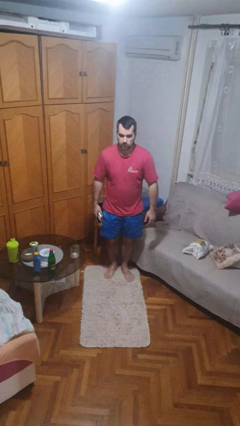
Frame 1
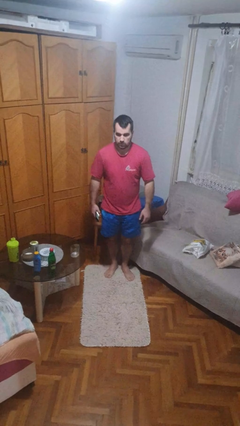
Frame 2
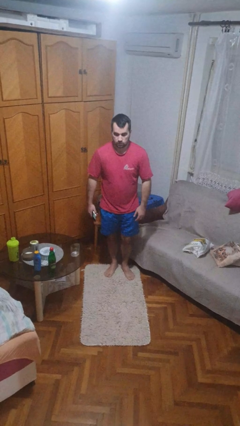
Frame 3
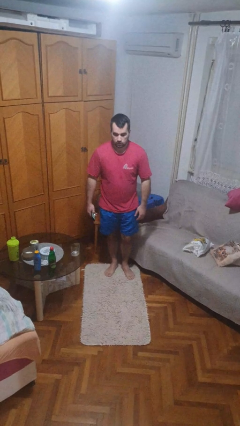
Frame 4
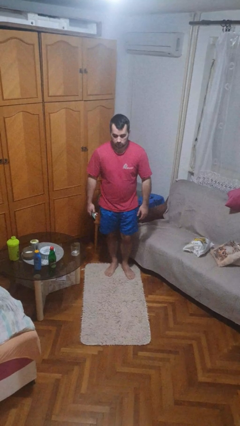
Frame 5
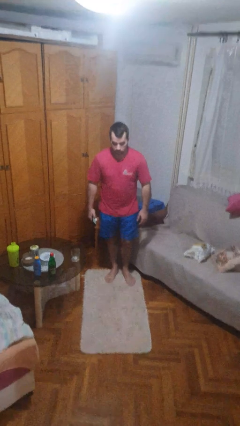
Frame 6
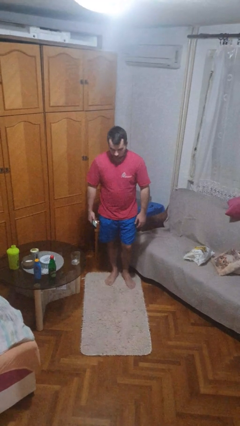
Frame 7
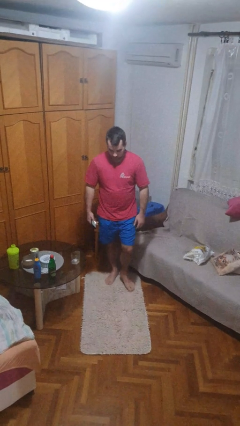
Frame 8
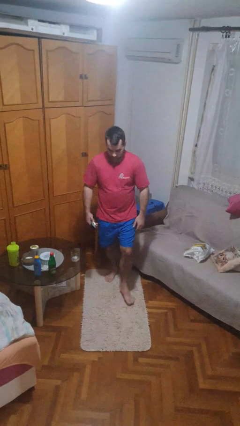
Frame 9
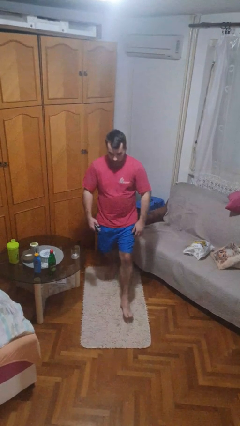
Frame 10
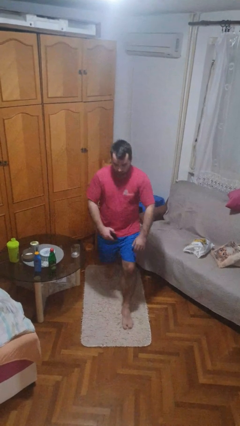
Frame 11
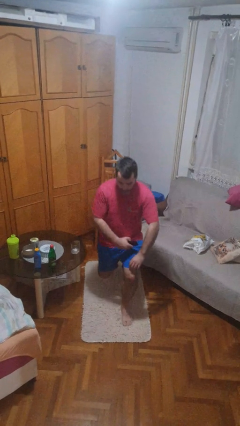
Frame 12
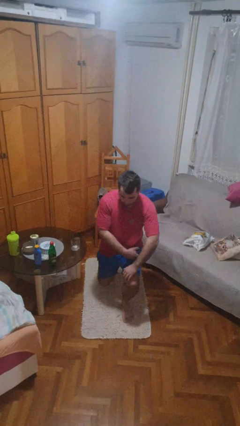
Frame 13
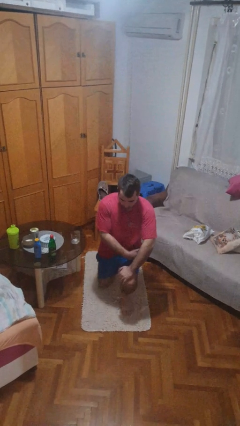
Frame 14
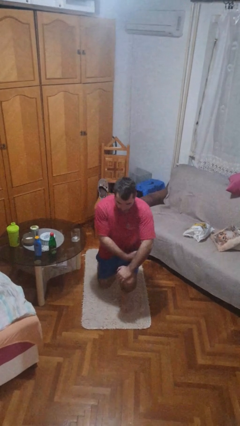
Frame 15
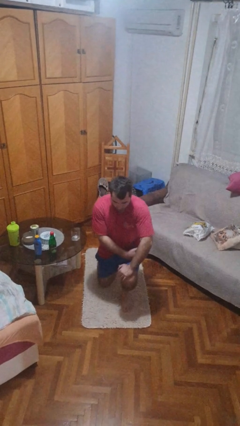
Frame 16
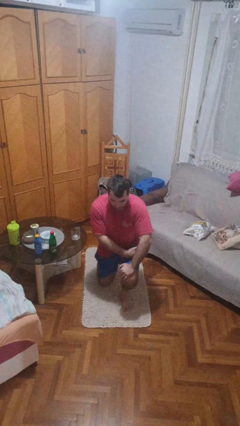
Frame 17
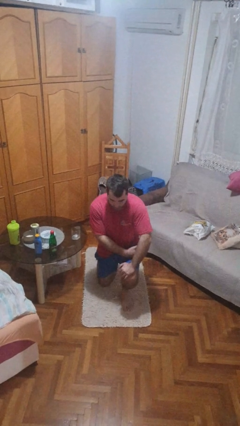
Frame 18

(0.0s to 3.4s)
person kneels

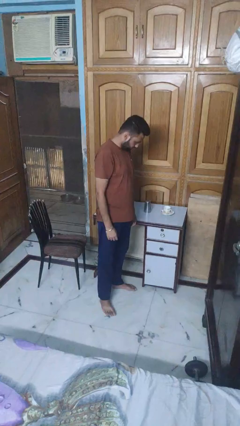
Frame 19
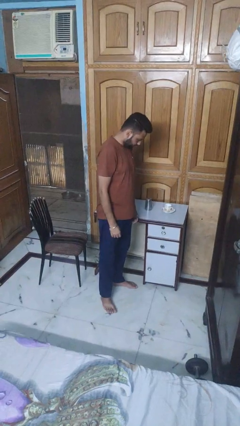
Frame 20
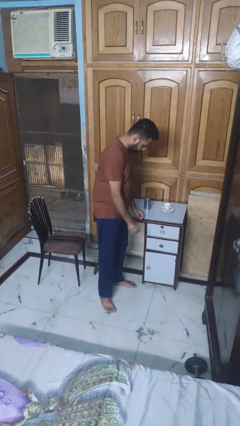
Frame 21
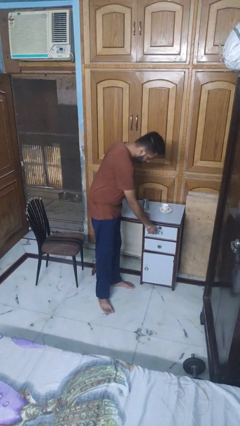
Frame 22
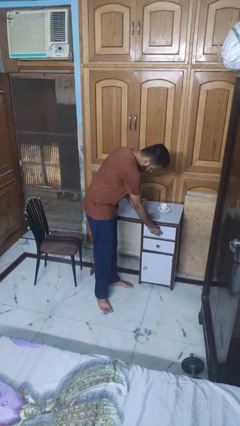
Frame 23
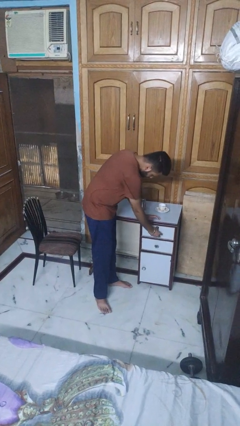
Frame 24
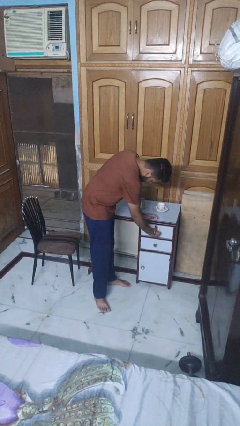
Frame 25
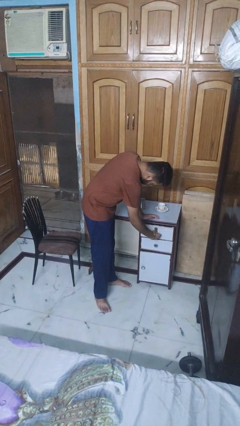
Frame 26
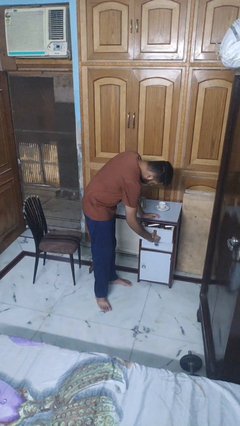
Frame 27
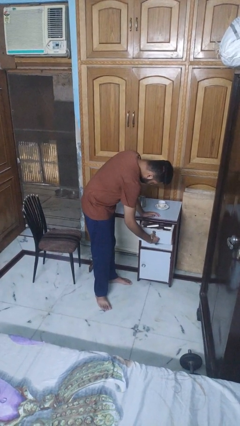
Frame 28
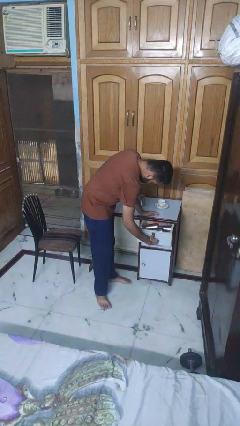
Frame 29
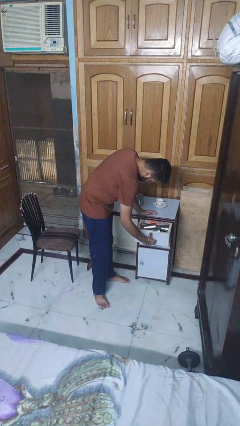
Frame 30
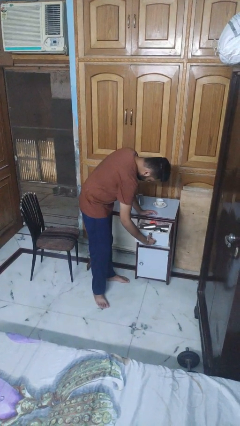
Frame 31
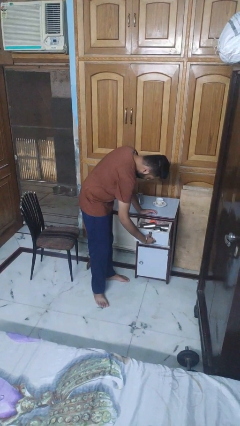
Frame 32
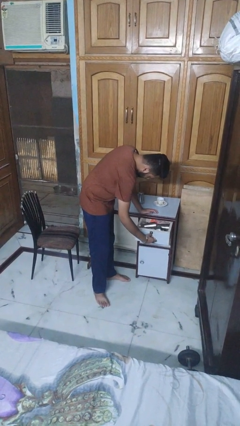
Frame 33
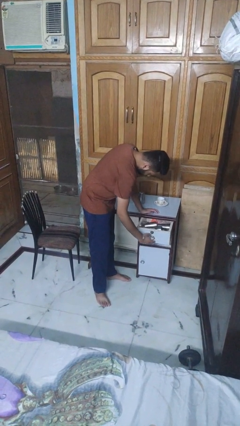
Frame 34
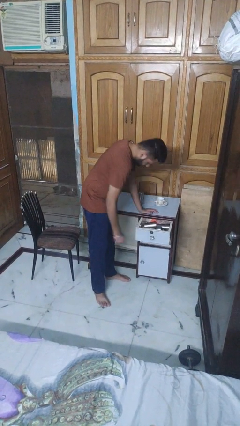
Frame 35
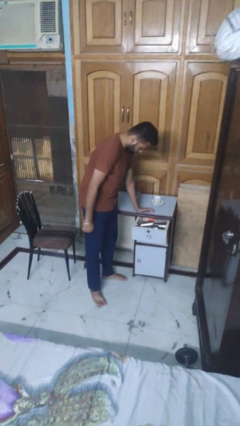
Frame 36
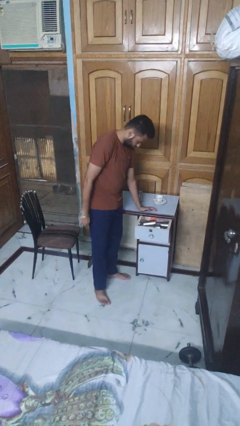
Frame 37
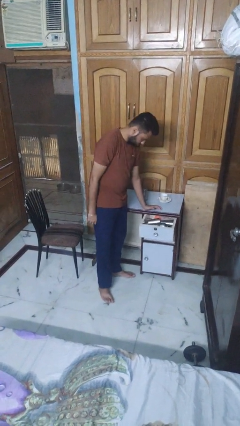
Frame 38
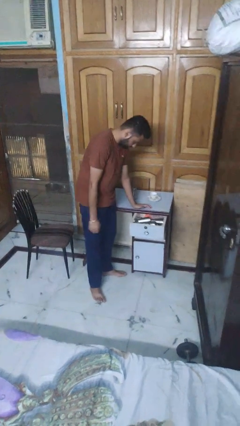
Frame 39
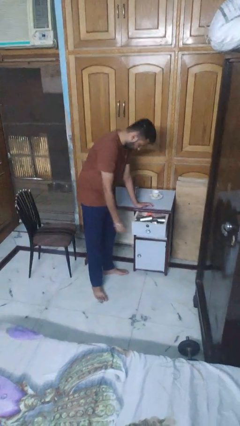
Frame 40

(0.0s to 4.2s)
person opens kitchen drawer

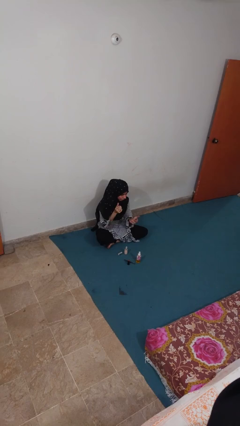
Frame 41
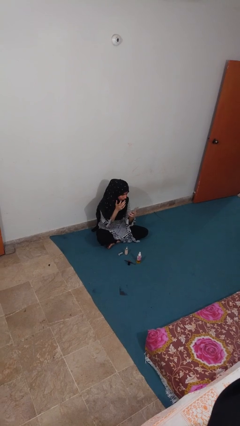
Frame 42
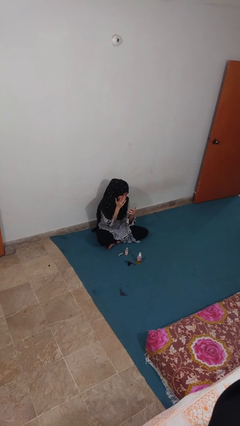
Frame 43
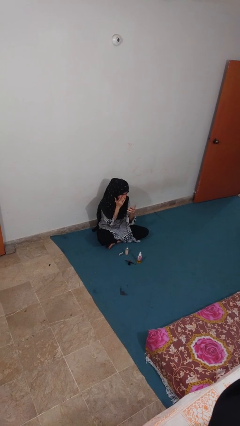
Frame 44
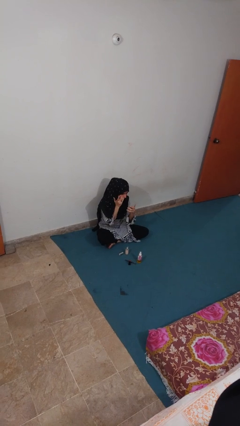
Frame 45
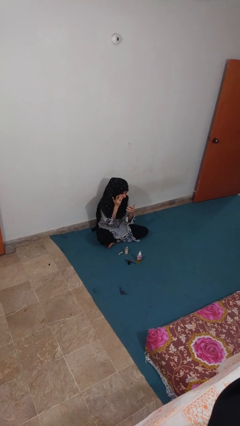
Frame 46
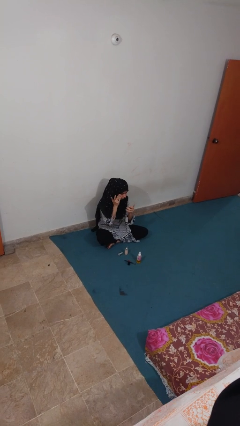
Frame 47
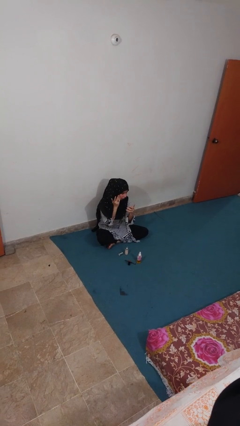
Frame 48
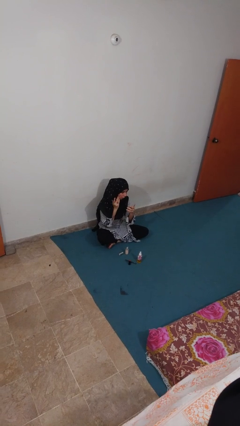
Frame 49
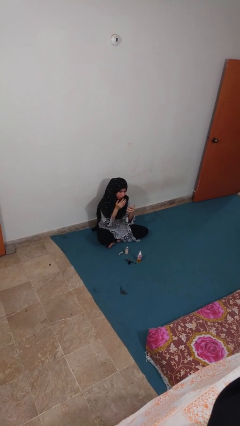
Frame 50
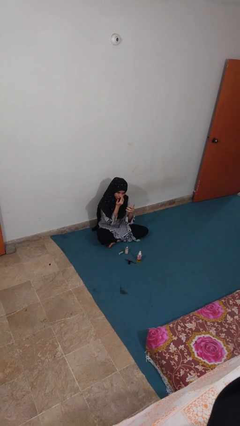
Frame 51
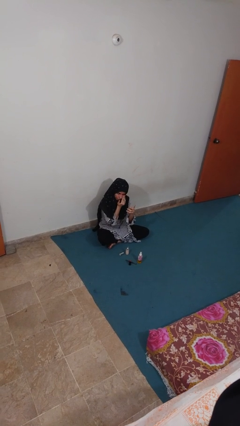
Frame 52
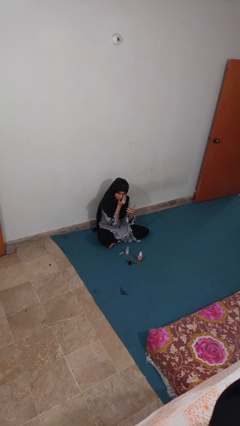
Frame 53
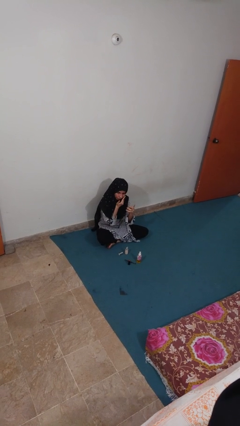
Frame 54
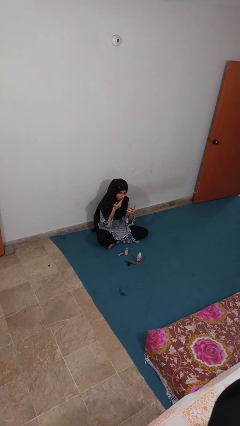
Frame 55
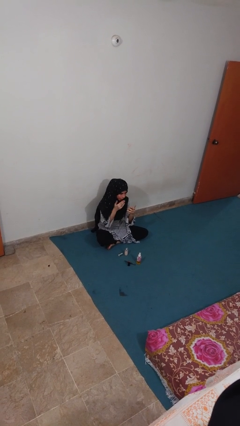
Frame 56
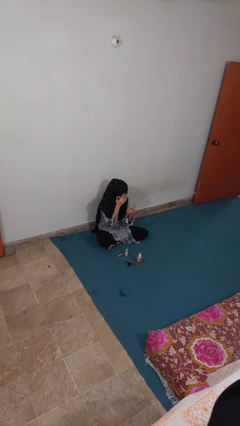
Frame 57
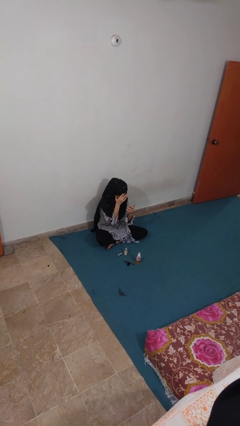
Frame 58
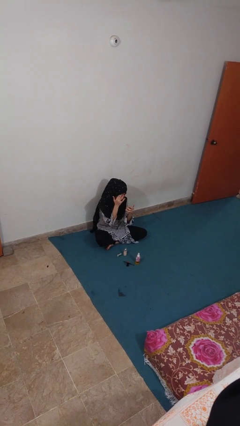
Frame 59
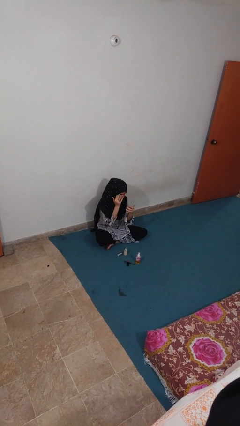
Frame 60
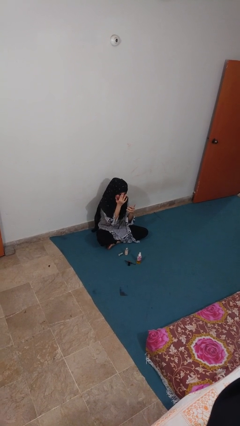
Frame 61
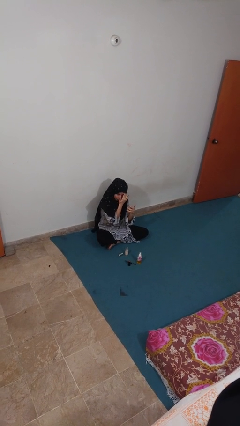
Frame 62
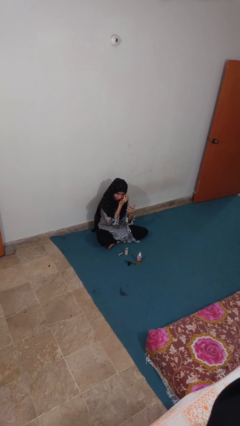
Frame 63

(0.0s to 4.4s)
person applies foundation makeup

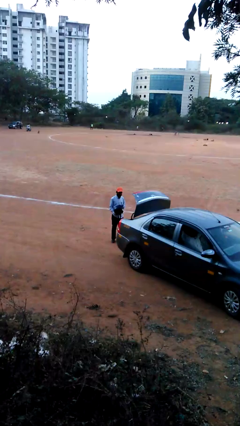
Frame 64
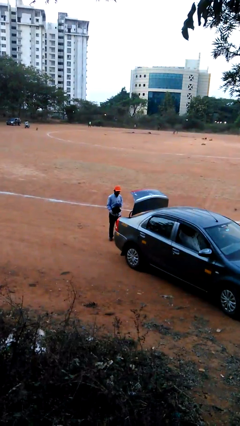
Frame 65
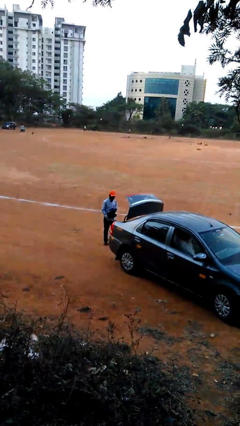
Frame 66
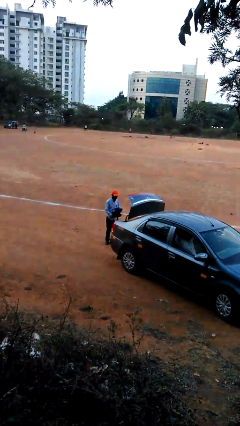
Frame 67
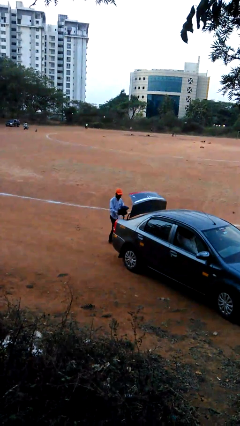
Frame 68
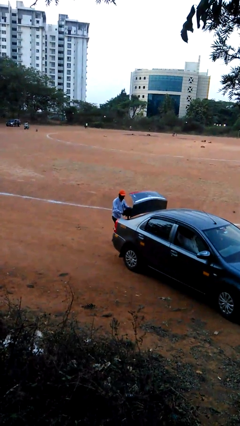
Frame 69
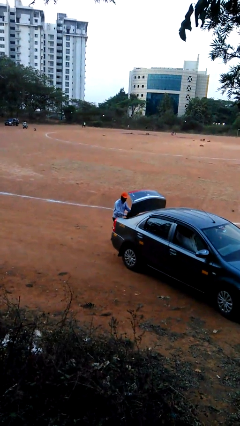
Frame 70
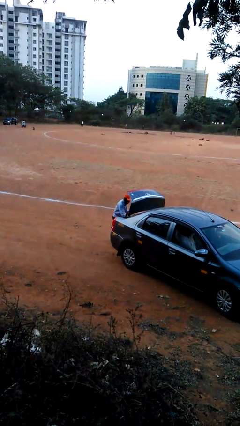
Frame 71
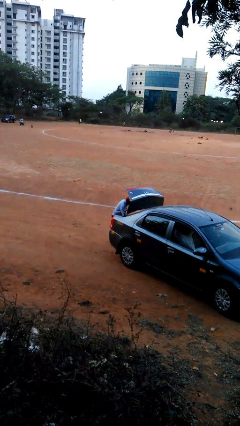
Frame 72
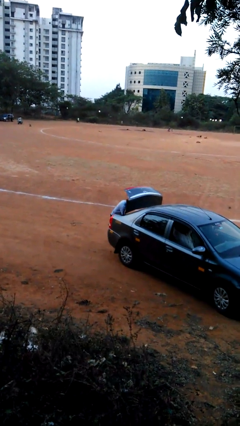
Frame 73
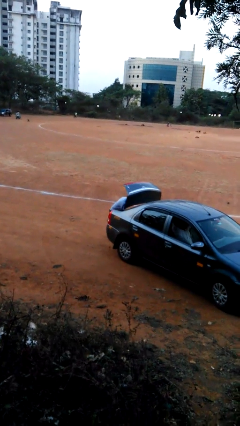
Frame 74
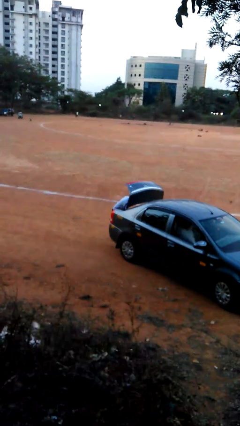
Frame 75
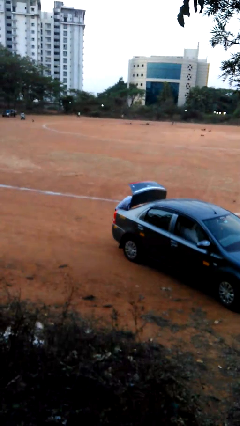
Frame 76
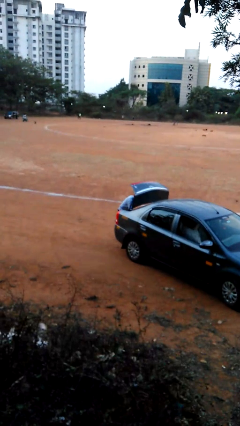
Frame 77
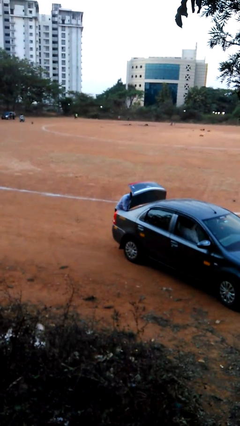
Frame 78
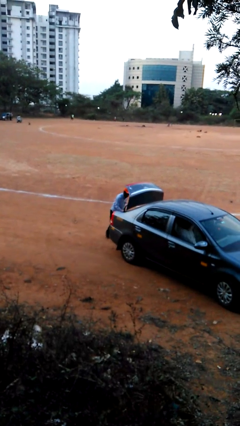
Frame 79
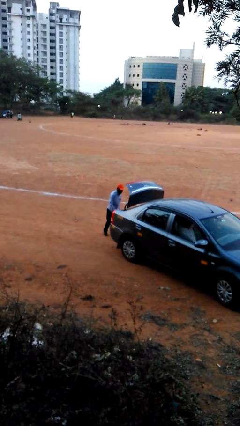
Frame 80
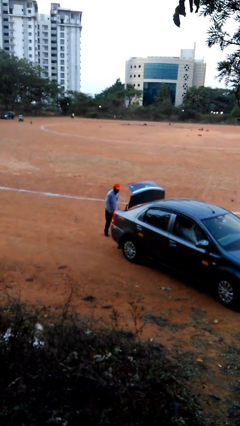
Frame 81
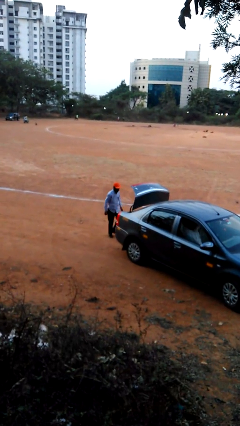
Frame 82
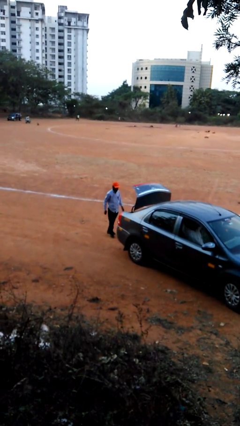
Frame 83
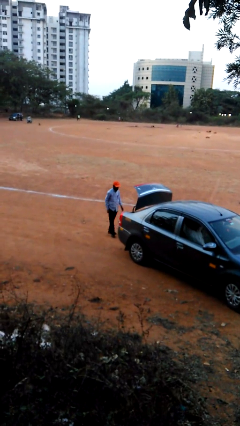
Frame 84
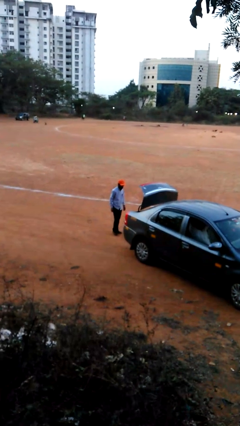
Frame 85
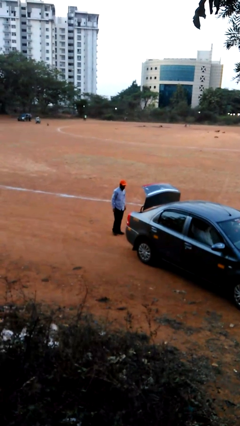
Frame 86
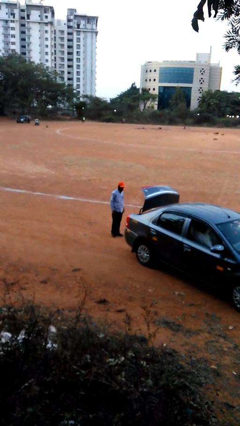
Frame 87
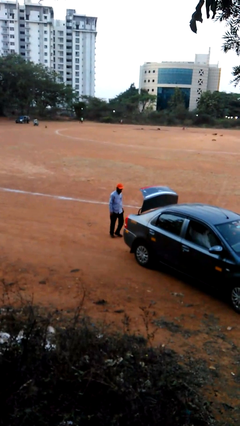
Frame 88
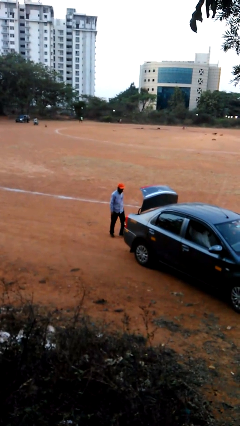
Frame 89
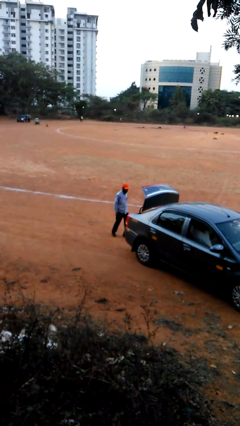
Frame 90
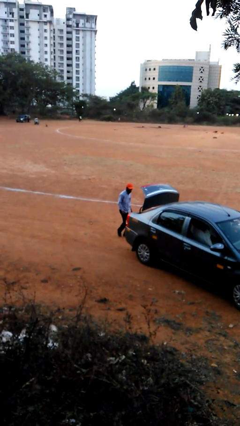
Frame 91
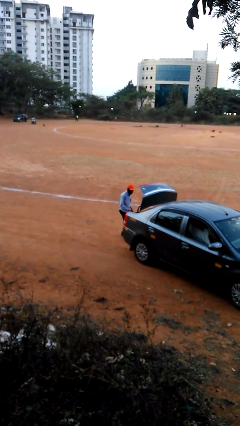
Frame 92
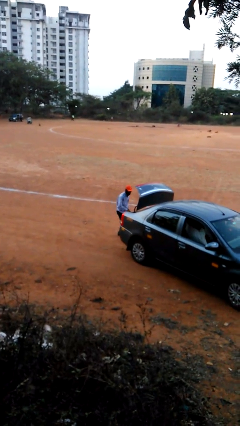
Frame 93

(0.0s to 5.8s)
person loads car
